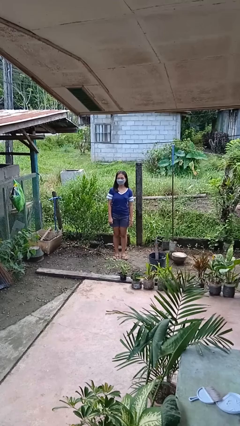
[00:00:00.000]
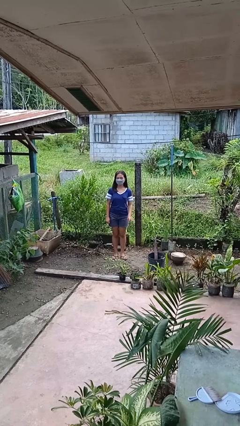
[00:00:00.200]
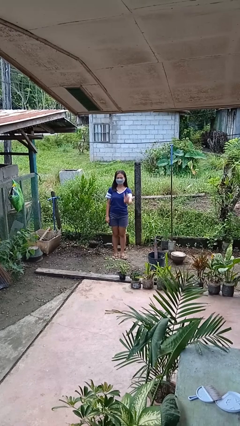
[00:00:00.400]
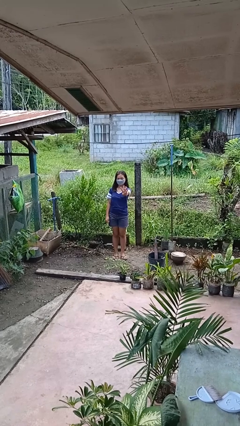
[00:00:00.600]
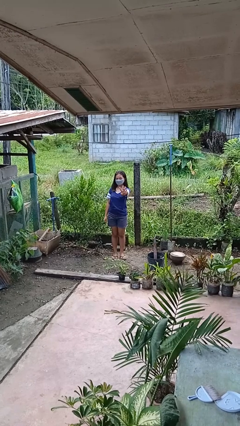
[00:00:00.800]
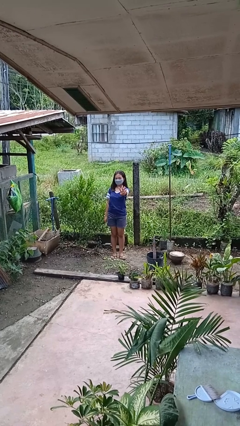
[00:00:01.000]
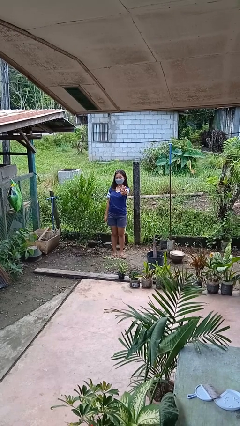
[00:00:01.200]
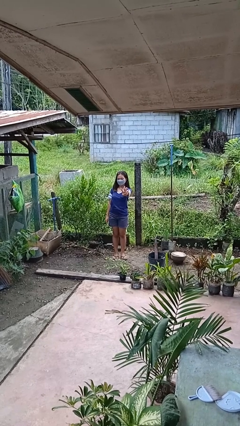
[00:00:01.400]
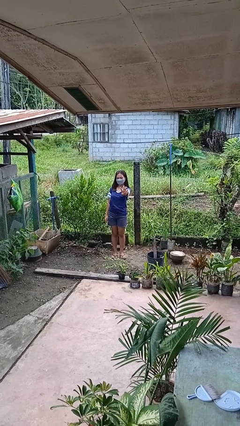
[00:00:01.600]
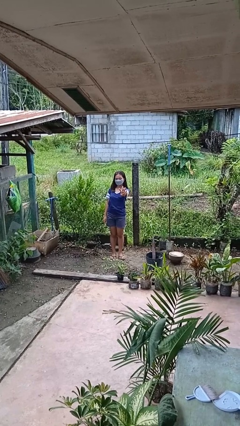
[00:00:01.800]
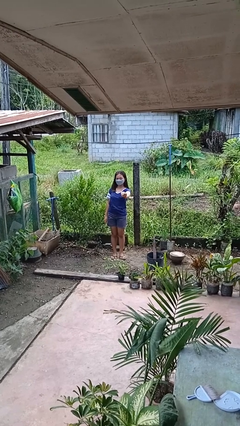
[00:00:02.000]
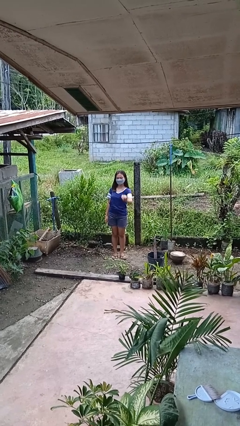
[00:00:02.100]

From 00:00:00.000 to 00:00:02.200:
person gestures number four

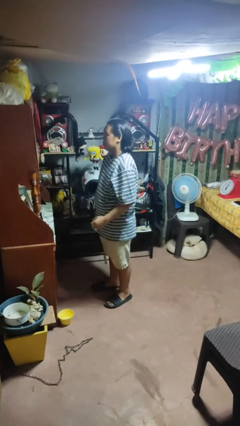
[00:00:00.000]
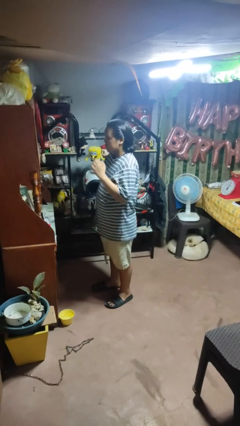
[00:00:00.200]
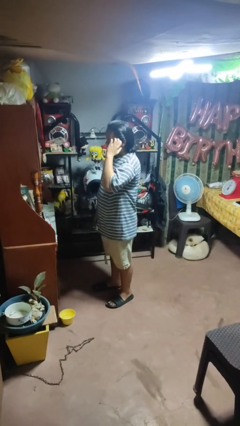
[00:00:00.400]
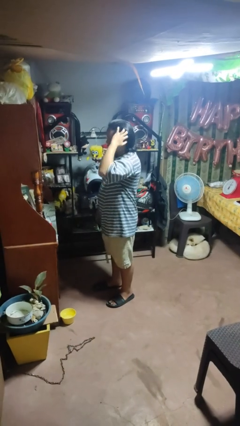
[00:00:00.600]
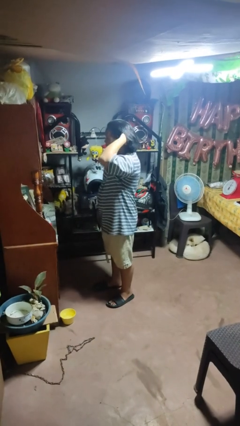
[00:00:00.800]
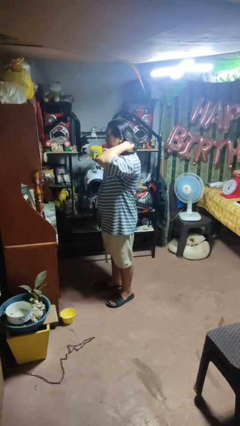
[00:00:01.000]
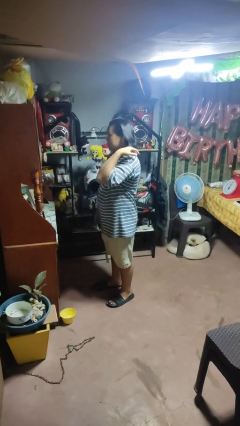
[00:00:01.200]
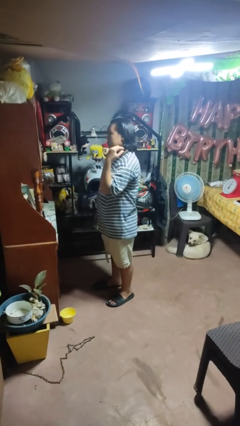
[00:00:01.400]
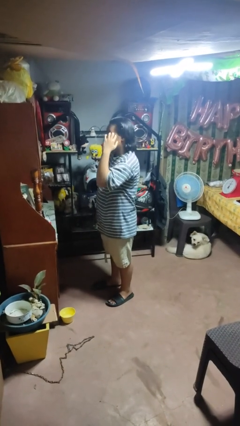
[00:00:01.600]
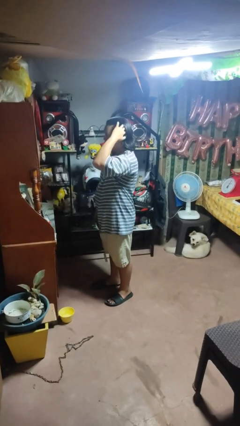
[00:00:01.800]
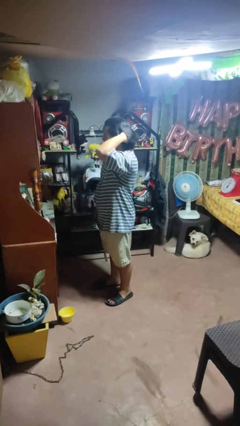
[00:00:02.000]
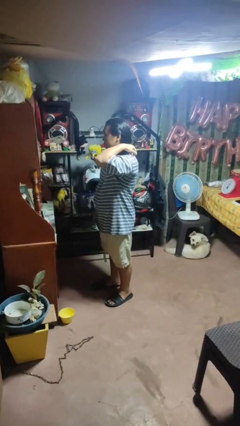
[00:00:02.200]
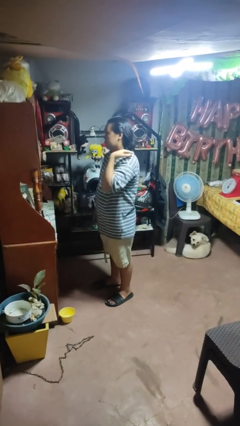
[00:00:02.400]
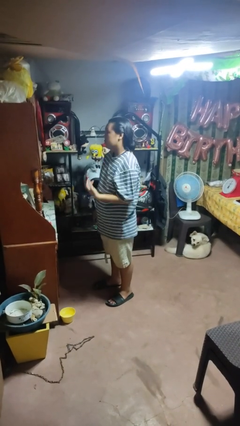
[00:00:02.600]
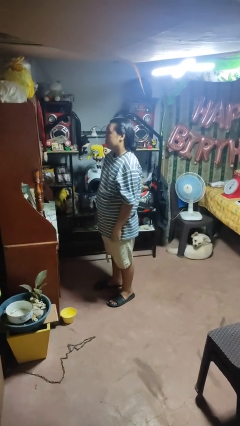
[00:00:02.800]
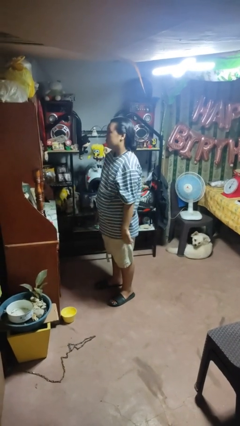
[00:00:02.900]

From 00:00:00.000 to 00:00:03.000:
person strokes hair

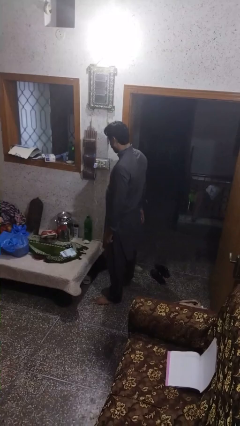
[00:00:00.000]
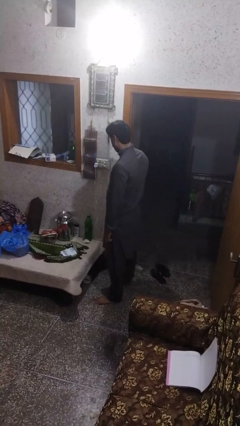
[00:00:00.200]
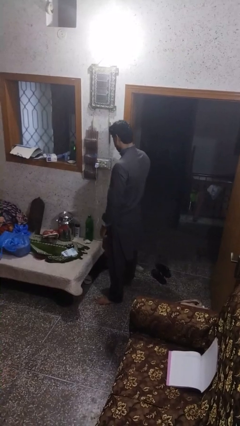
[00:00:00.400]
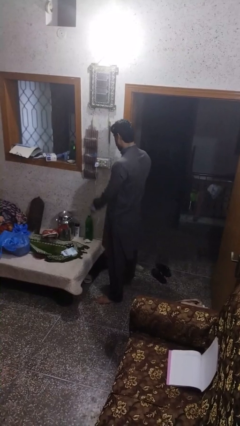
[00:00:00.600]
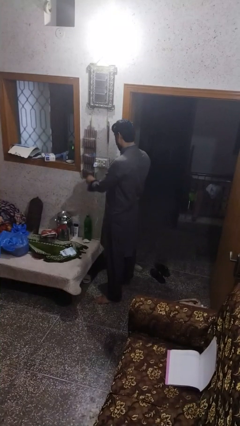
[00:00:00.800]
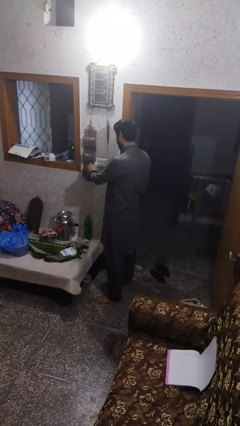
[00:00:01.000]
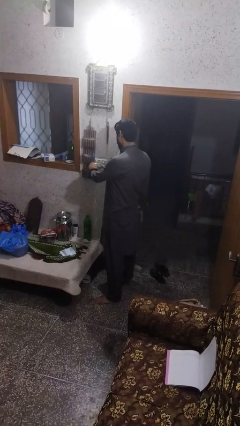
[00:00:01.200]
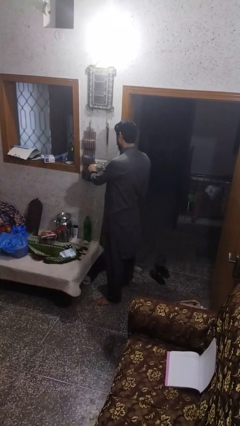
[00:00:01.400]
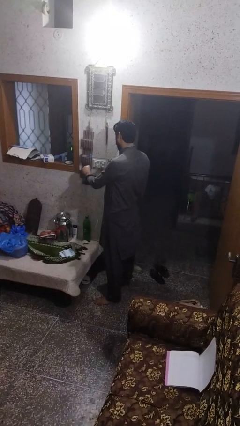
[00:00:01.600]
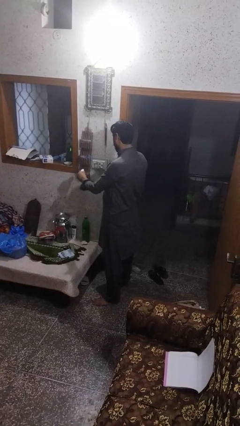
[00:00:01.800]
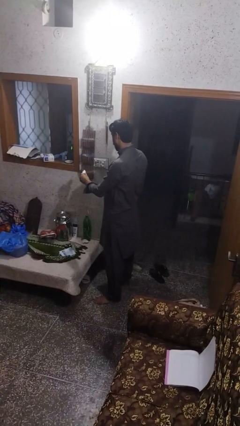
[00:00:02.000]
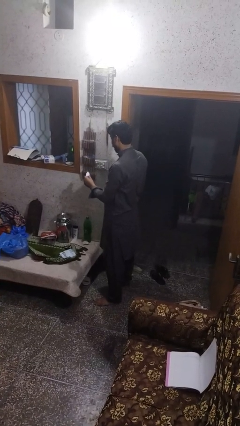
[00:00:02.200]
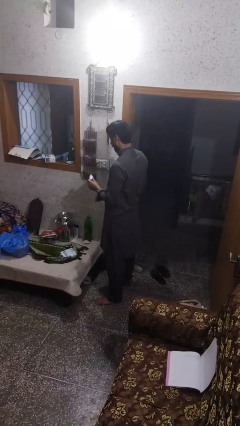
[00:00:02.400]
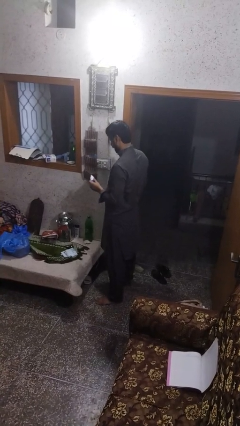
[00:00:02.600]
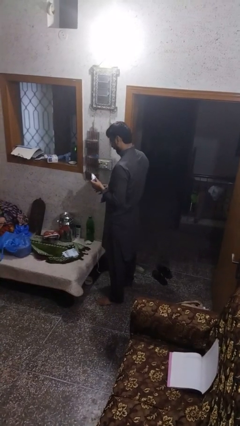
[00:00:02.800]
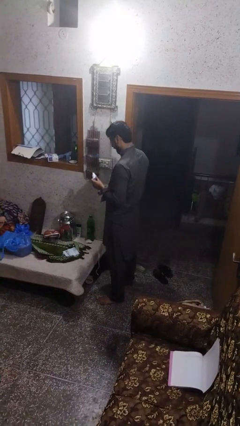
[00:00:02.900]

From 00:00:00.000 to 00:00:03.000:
person unplugs from electrical socket

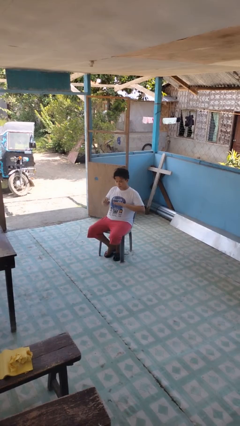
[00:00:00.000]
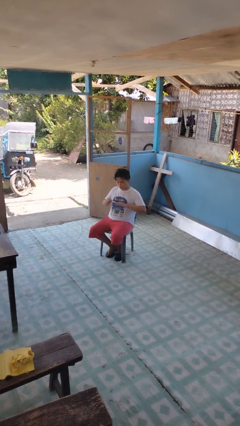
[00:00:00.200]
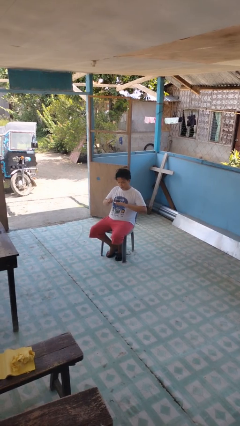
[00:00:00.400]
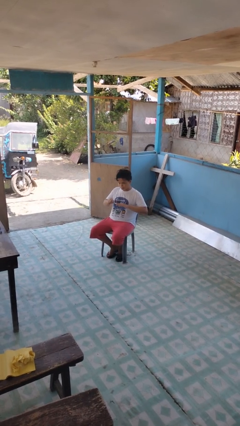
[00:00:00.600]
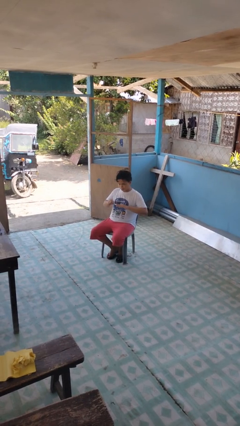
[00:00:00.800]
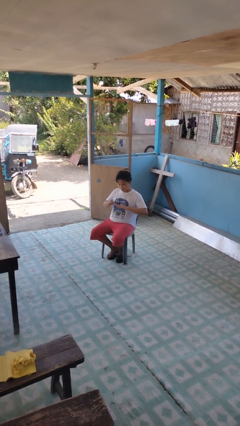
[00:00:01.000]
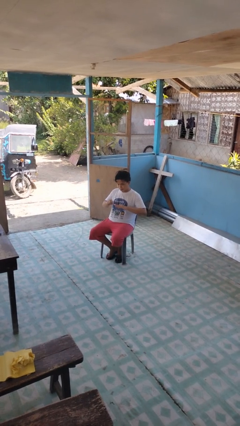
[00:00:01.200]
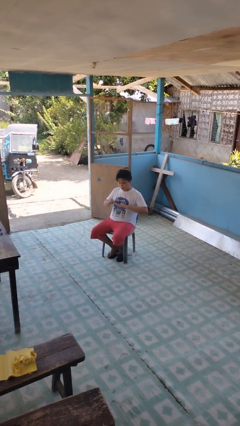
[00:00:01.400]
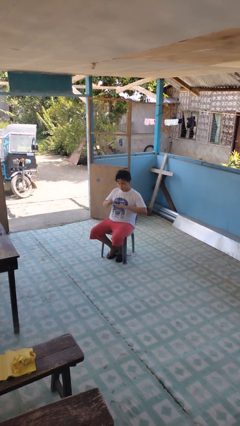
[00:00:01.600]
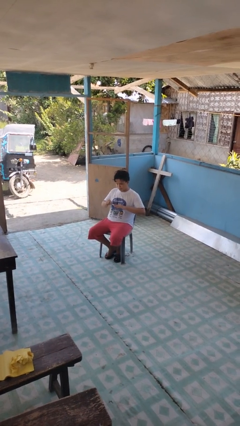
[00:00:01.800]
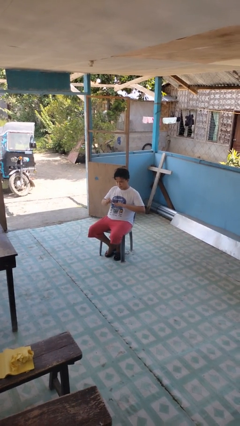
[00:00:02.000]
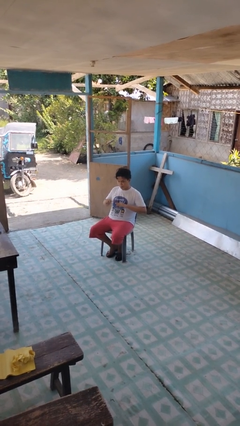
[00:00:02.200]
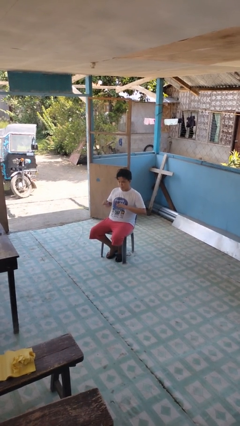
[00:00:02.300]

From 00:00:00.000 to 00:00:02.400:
person files fingernails

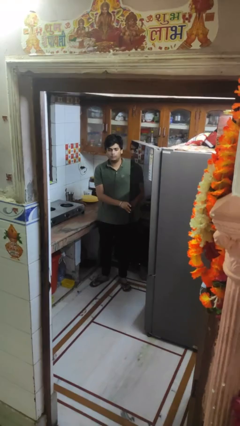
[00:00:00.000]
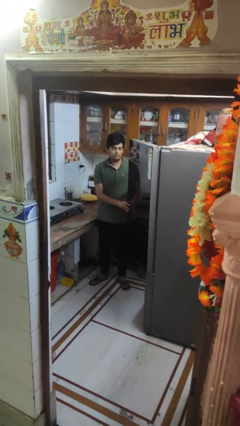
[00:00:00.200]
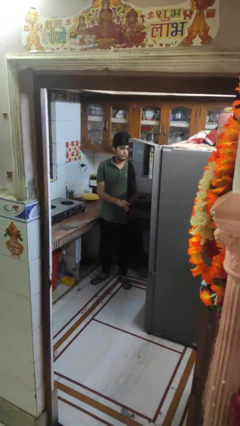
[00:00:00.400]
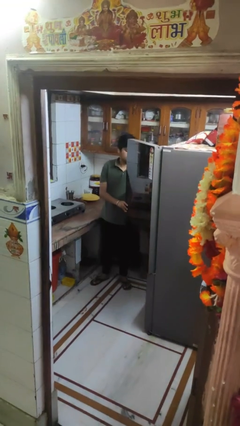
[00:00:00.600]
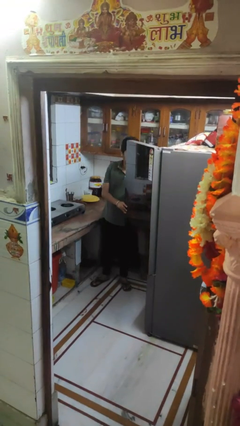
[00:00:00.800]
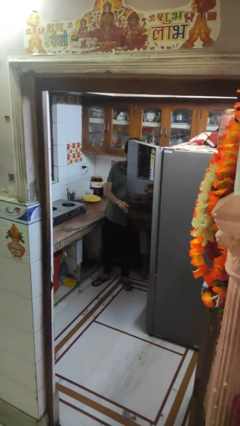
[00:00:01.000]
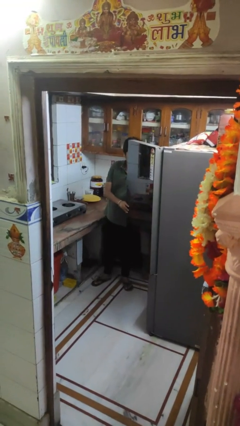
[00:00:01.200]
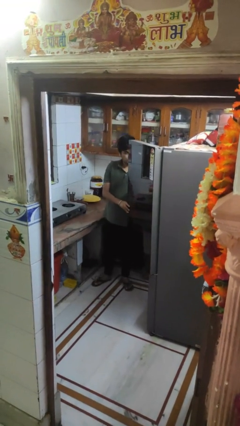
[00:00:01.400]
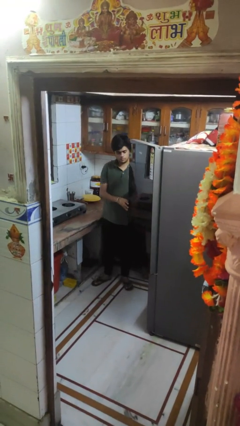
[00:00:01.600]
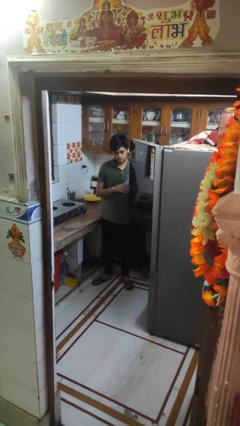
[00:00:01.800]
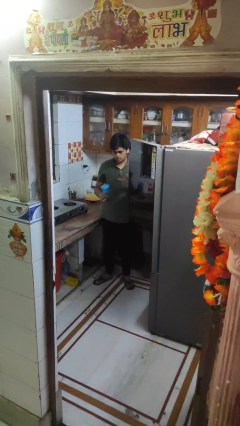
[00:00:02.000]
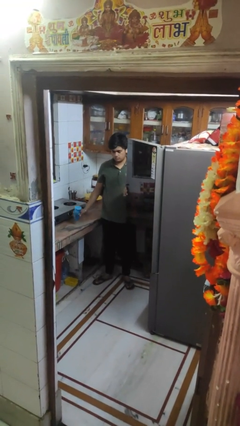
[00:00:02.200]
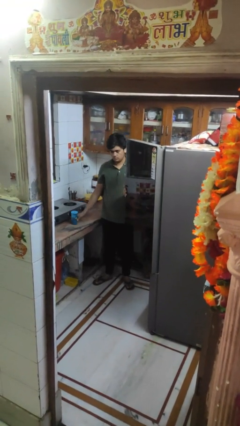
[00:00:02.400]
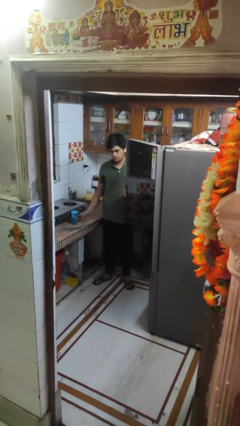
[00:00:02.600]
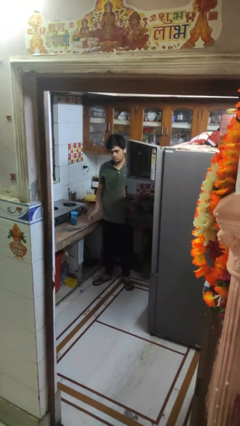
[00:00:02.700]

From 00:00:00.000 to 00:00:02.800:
person takes object from refrigerator

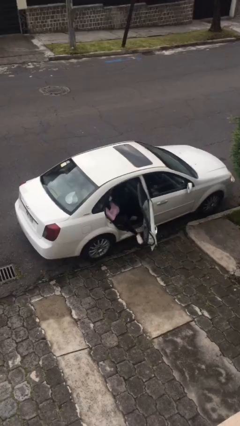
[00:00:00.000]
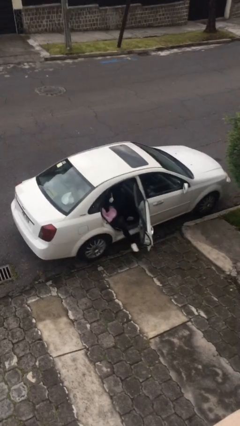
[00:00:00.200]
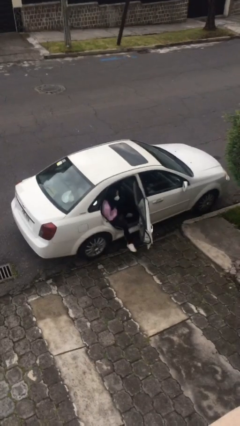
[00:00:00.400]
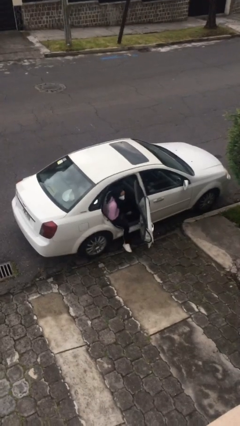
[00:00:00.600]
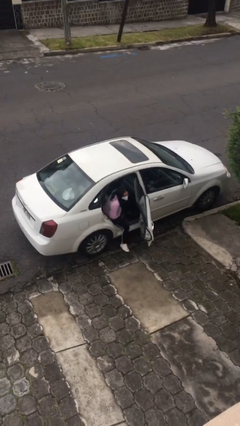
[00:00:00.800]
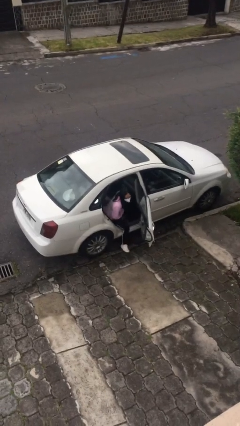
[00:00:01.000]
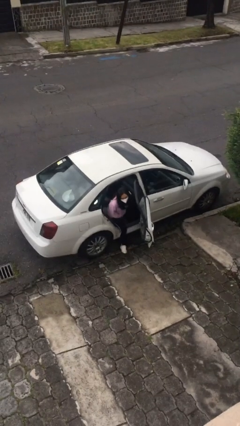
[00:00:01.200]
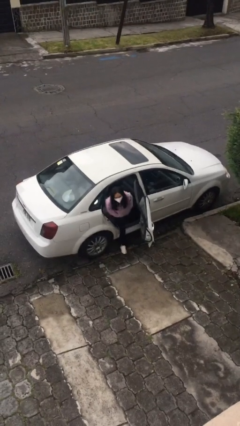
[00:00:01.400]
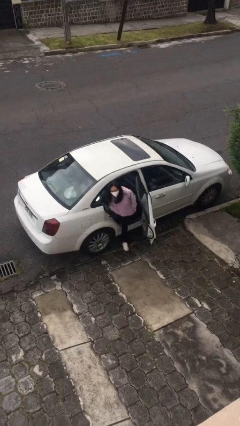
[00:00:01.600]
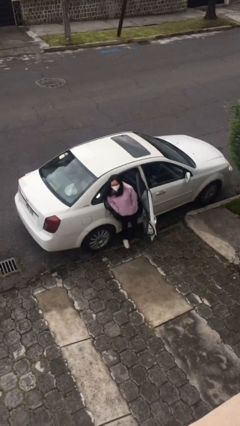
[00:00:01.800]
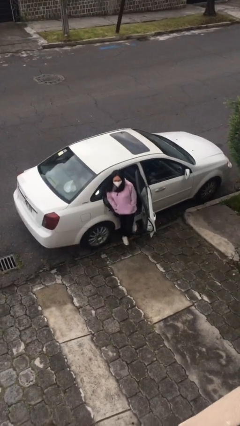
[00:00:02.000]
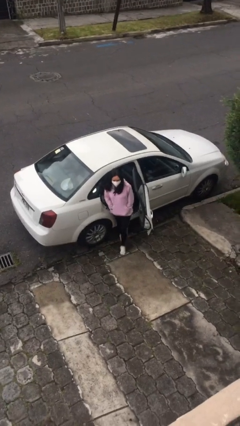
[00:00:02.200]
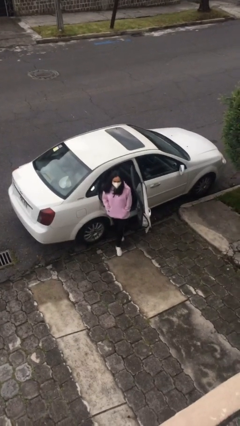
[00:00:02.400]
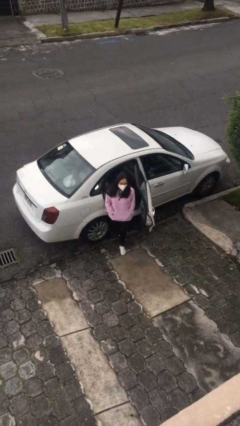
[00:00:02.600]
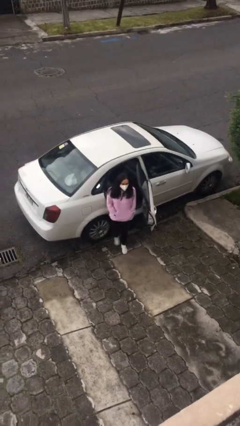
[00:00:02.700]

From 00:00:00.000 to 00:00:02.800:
person exits car

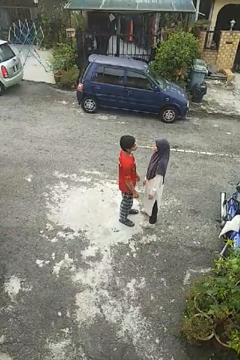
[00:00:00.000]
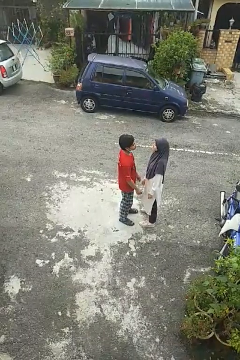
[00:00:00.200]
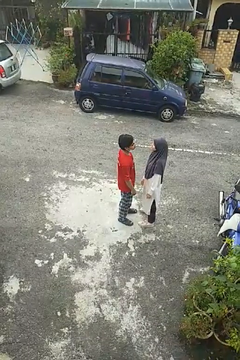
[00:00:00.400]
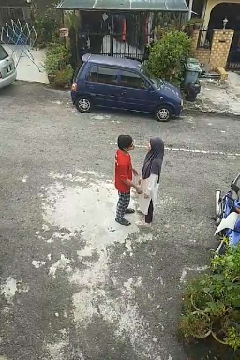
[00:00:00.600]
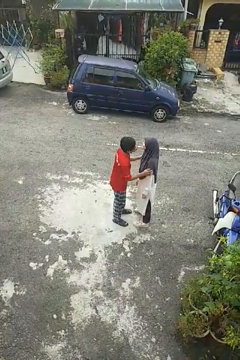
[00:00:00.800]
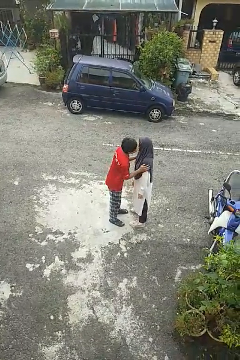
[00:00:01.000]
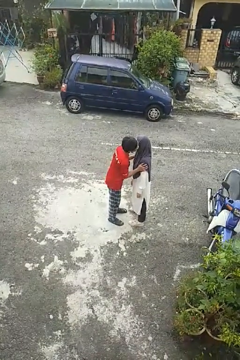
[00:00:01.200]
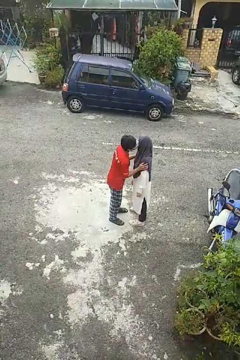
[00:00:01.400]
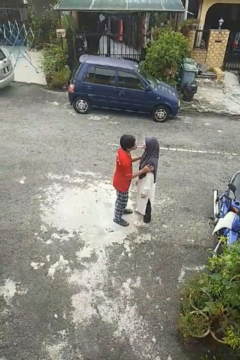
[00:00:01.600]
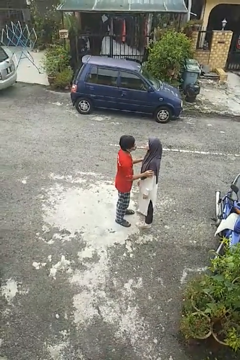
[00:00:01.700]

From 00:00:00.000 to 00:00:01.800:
person kisses cheek of person
